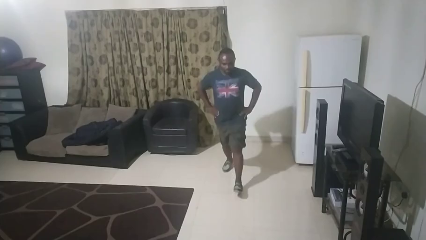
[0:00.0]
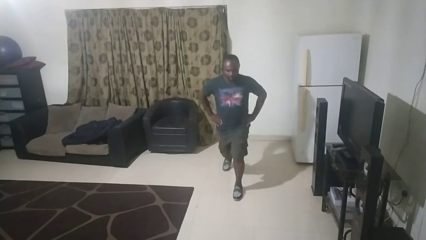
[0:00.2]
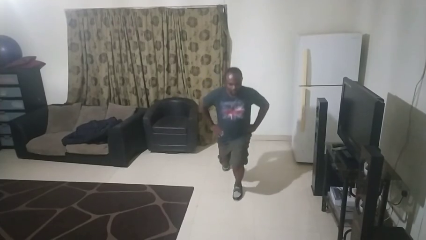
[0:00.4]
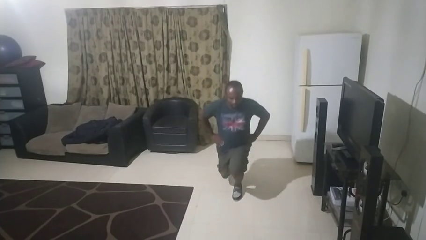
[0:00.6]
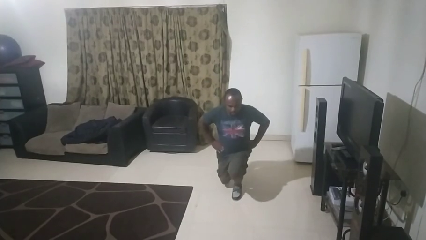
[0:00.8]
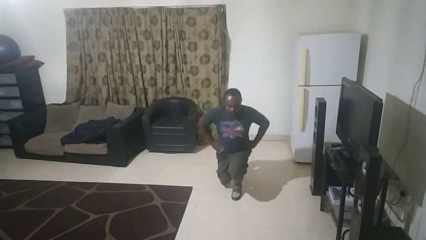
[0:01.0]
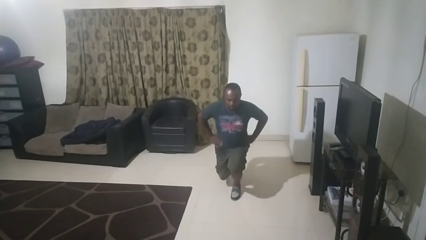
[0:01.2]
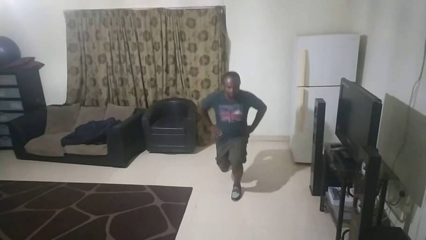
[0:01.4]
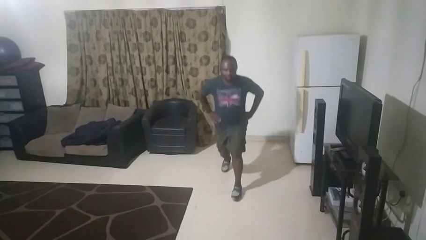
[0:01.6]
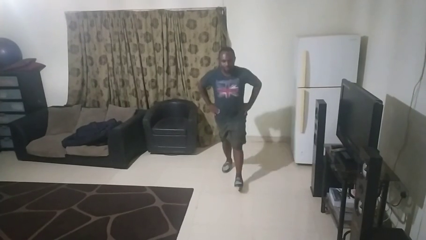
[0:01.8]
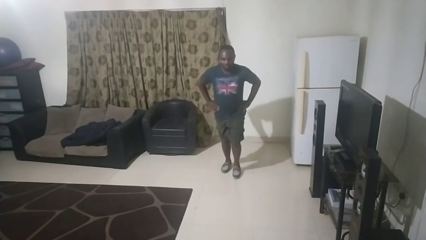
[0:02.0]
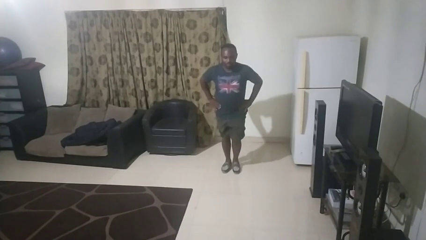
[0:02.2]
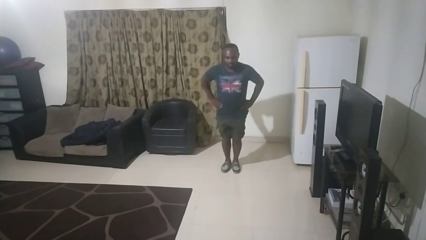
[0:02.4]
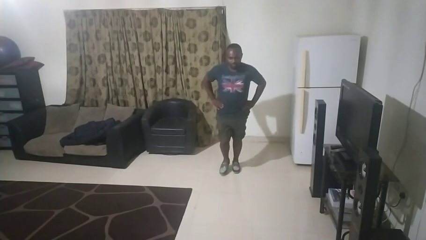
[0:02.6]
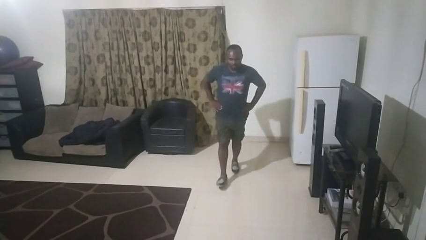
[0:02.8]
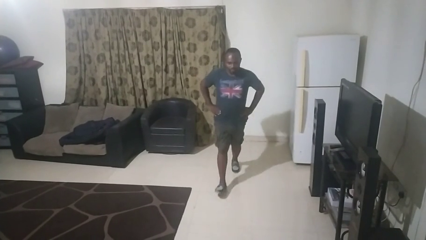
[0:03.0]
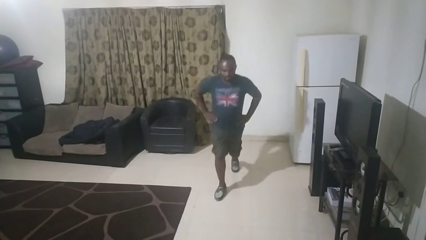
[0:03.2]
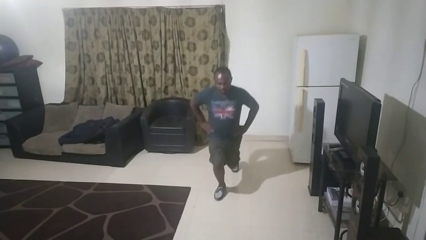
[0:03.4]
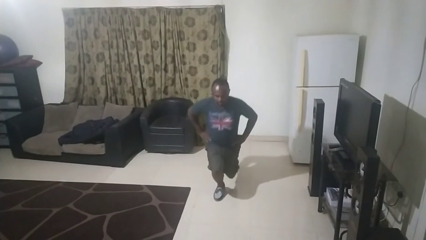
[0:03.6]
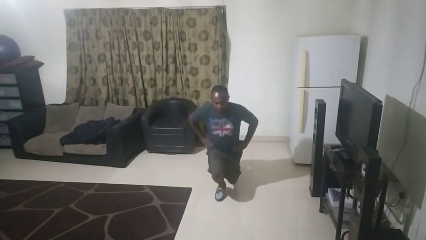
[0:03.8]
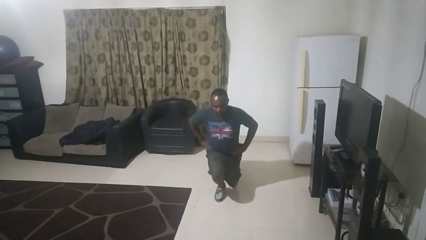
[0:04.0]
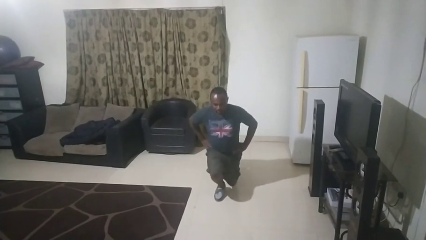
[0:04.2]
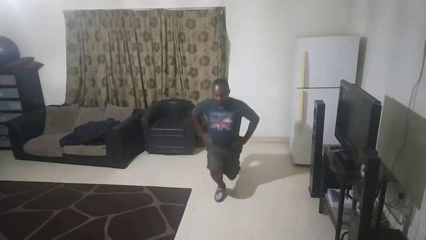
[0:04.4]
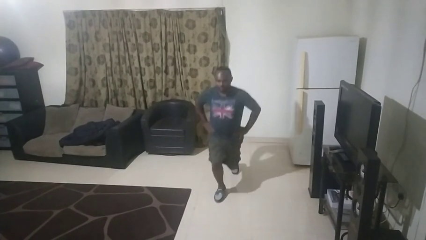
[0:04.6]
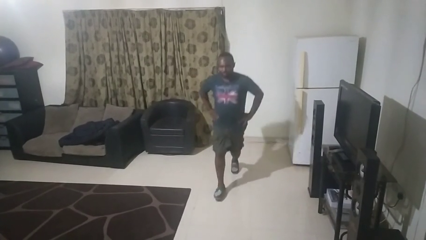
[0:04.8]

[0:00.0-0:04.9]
person exercises with lunges

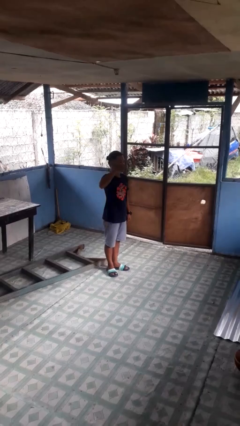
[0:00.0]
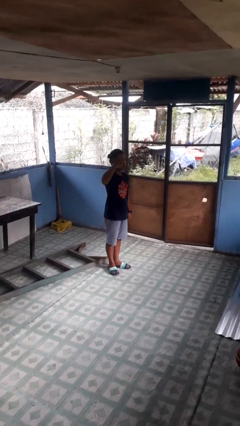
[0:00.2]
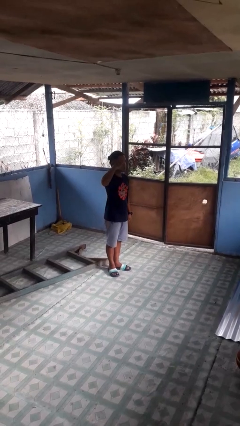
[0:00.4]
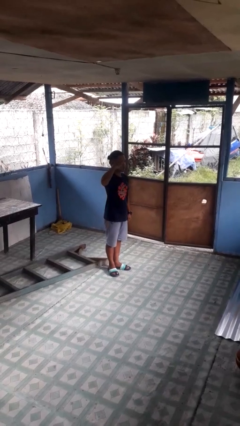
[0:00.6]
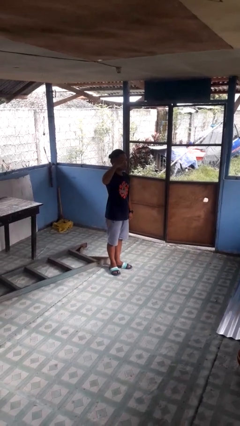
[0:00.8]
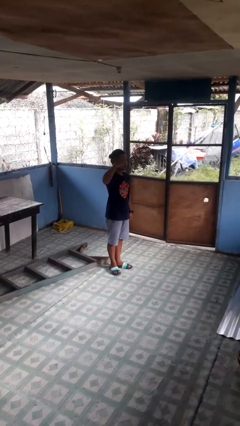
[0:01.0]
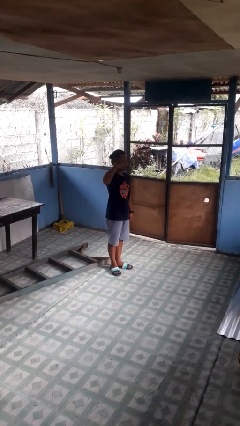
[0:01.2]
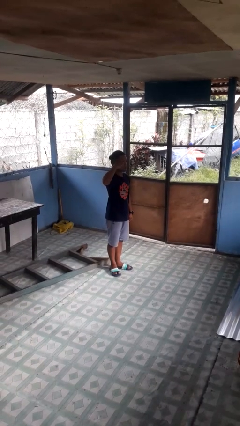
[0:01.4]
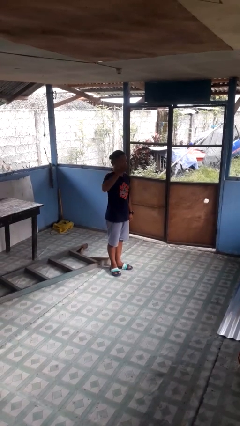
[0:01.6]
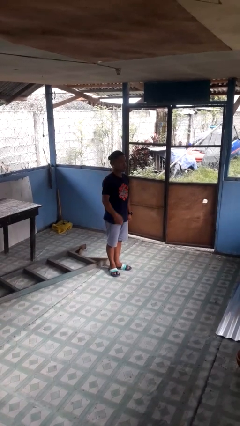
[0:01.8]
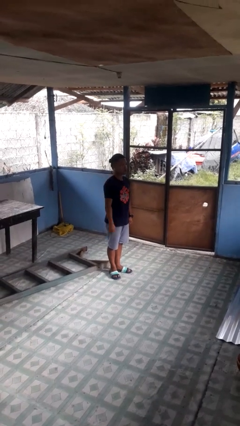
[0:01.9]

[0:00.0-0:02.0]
person salutes

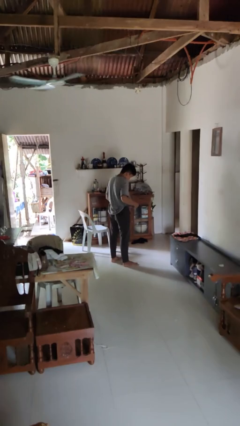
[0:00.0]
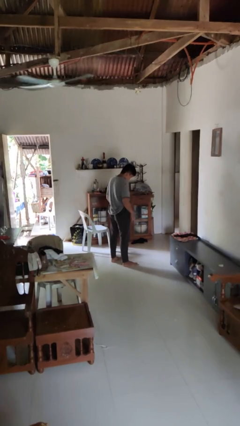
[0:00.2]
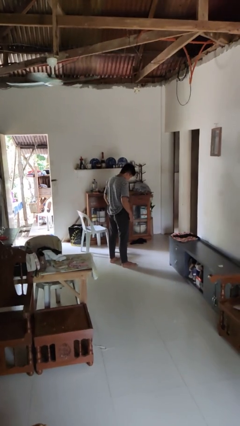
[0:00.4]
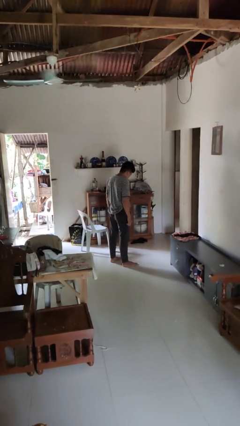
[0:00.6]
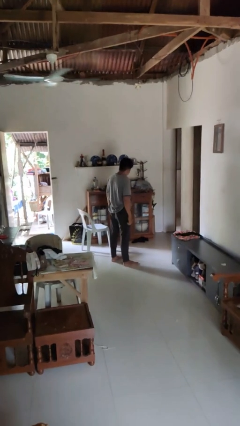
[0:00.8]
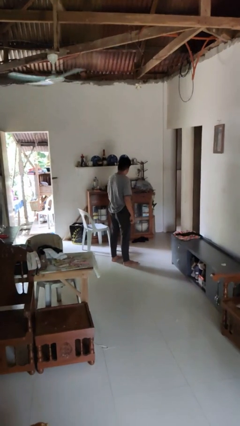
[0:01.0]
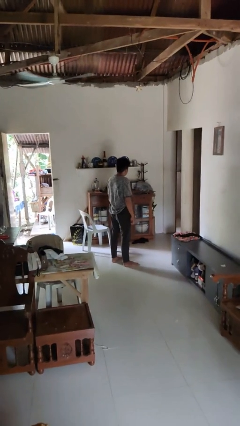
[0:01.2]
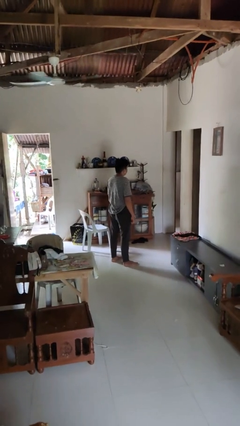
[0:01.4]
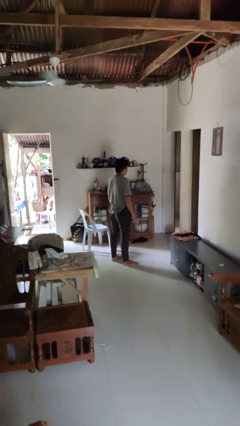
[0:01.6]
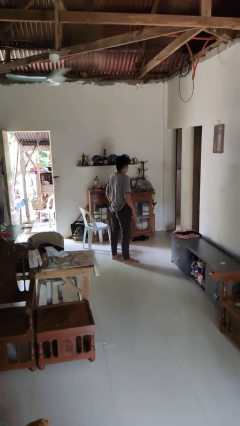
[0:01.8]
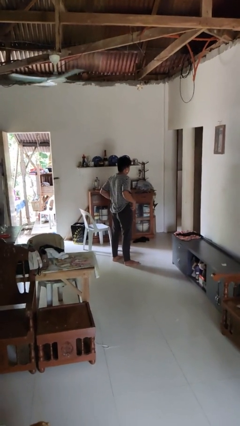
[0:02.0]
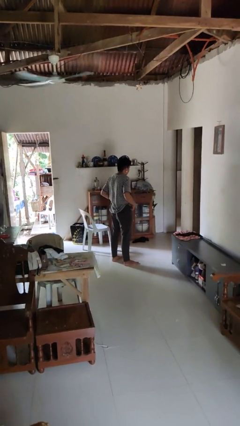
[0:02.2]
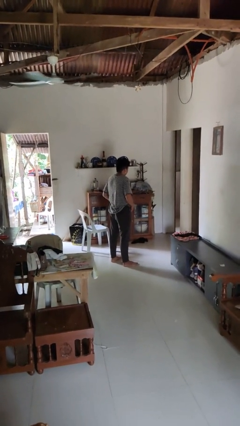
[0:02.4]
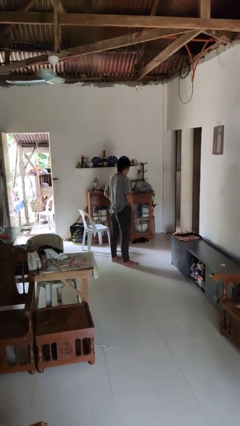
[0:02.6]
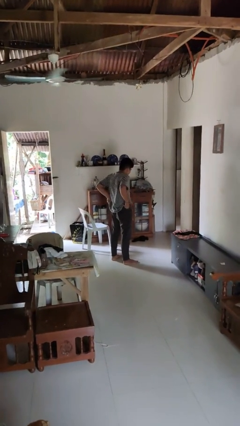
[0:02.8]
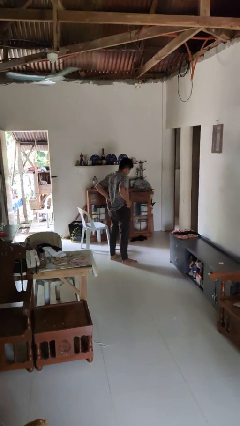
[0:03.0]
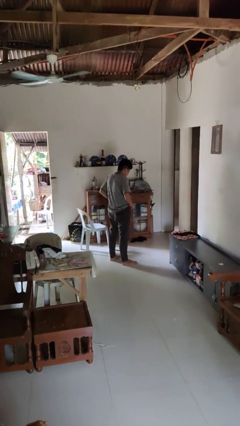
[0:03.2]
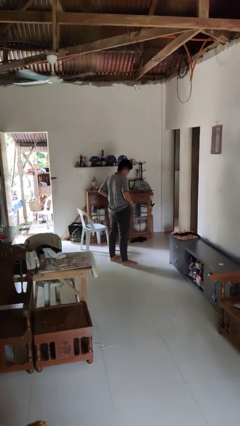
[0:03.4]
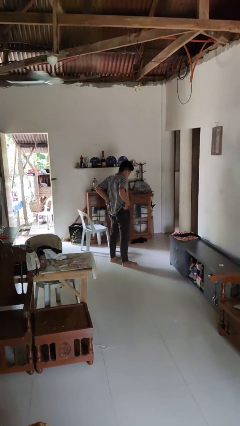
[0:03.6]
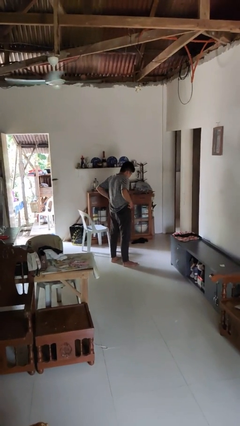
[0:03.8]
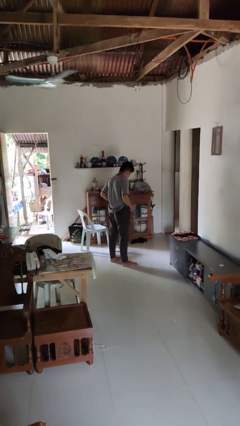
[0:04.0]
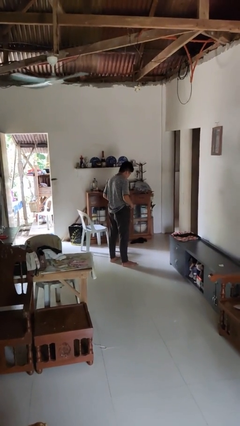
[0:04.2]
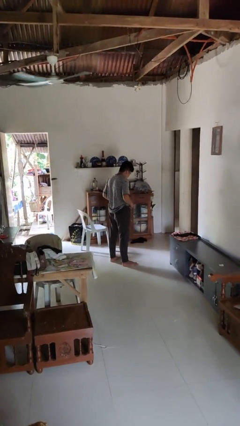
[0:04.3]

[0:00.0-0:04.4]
person hikes up pants

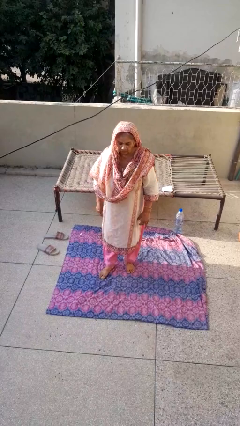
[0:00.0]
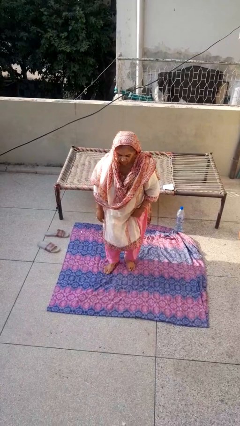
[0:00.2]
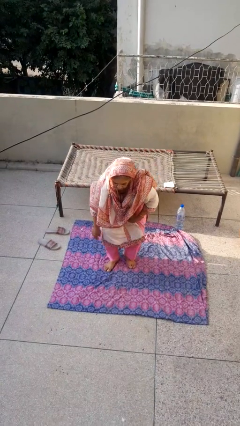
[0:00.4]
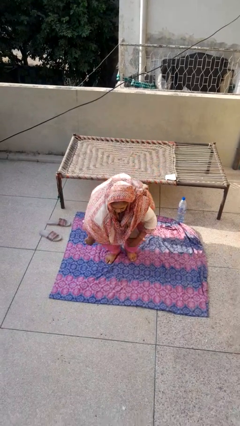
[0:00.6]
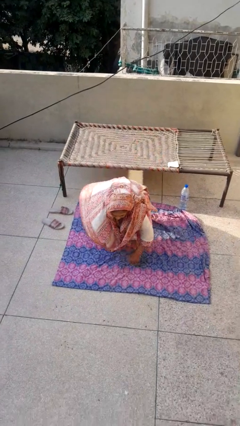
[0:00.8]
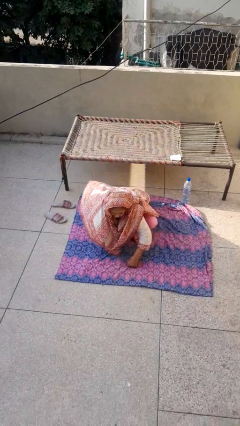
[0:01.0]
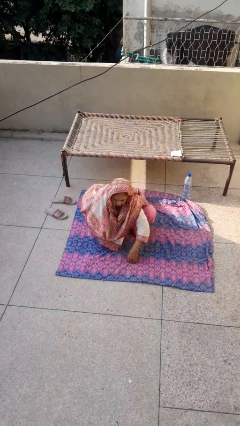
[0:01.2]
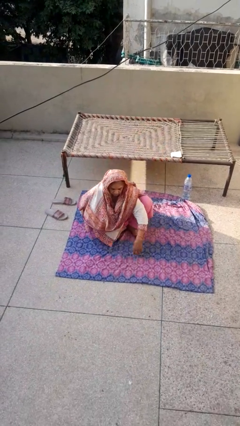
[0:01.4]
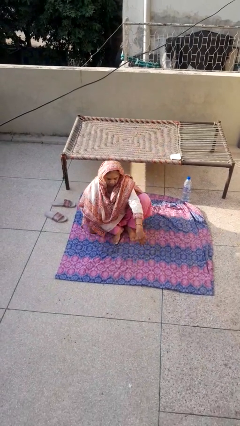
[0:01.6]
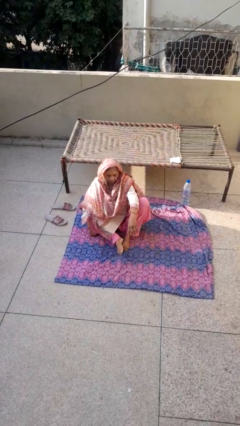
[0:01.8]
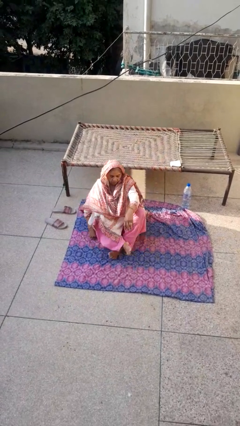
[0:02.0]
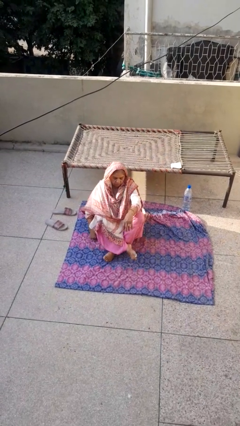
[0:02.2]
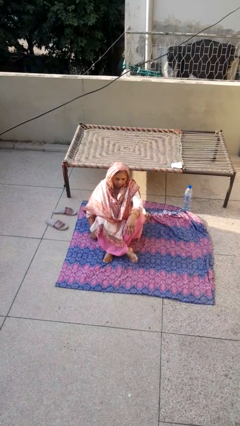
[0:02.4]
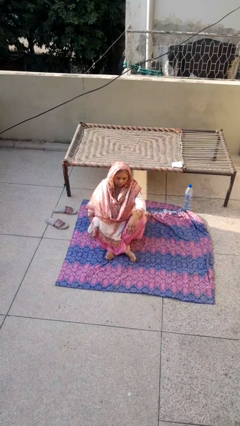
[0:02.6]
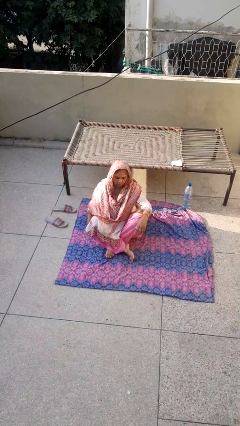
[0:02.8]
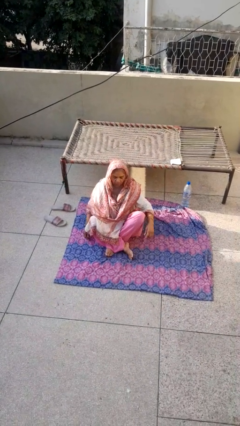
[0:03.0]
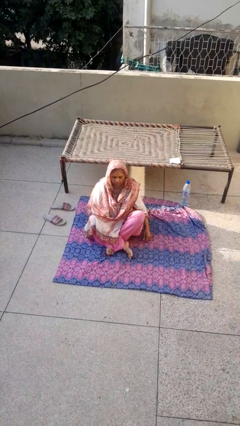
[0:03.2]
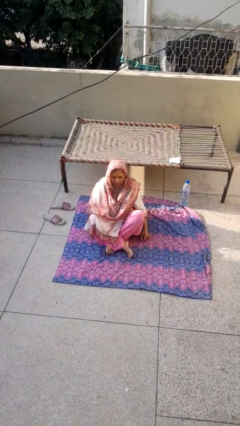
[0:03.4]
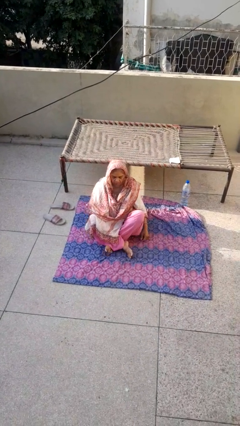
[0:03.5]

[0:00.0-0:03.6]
person sits crisscross

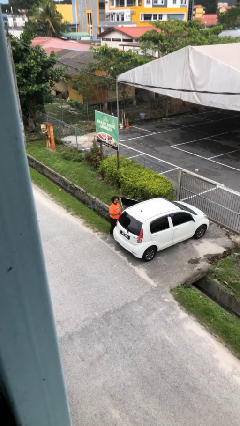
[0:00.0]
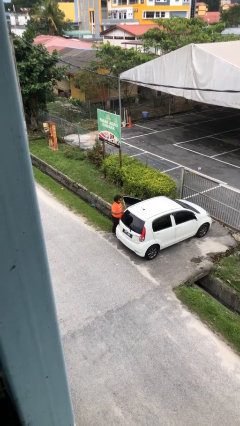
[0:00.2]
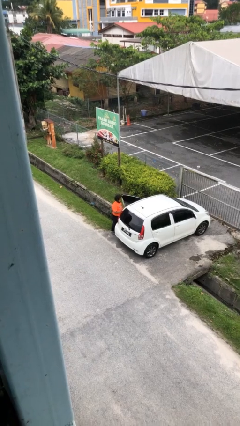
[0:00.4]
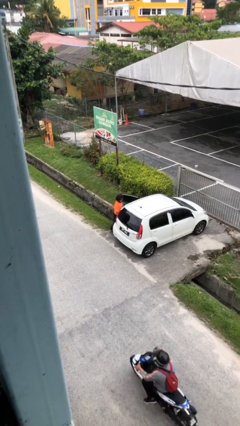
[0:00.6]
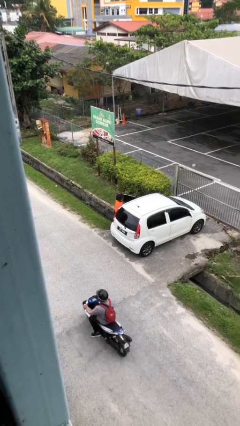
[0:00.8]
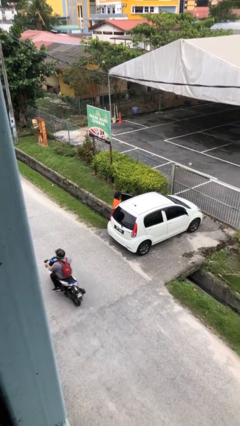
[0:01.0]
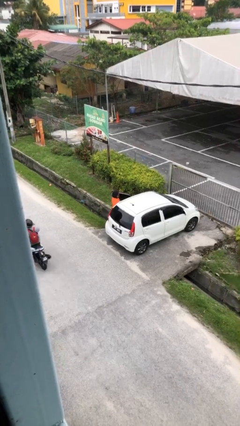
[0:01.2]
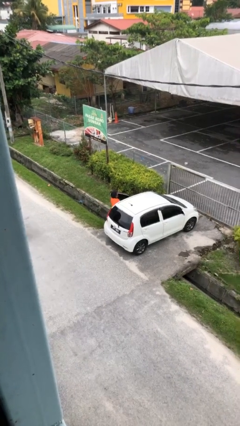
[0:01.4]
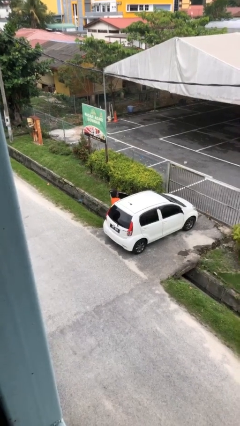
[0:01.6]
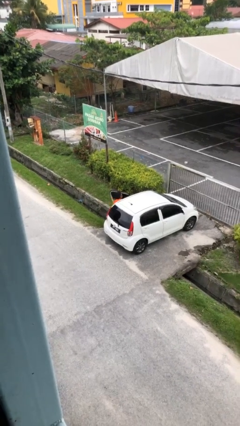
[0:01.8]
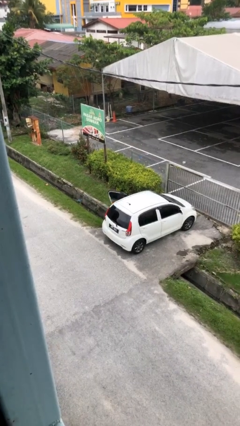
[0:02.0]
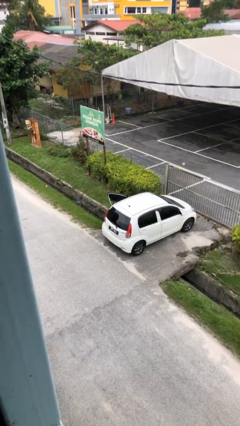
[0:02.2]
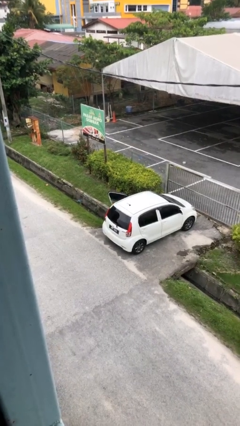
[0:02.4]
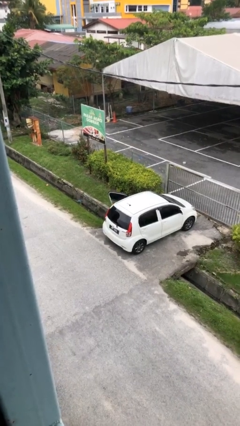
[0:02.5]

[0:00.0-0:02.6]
person enters car
